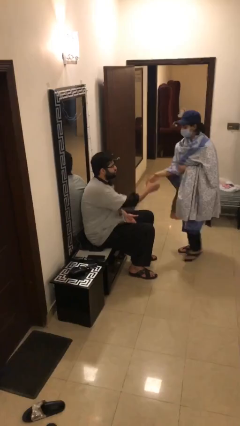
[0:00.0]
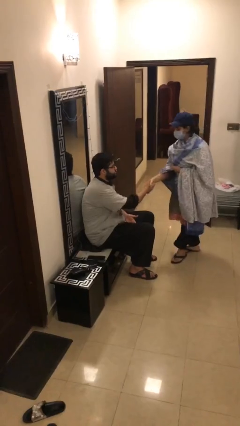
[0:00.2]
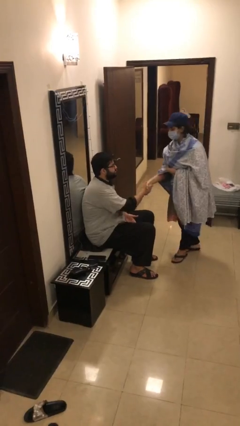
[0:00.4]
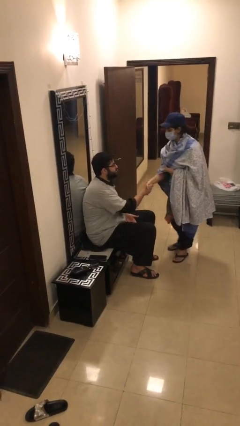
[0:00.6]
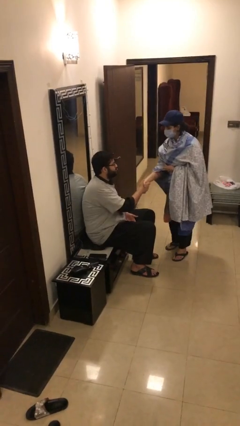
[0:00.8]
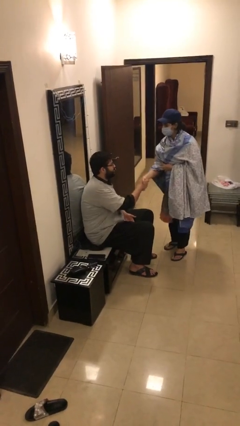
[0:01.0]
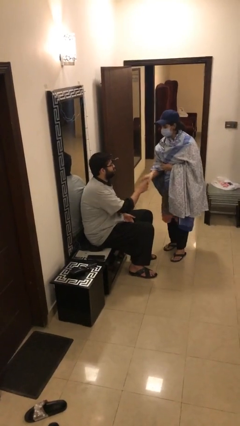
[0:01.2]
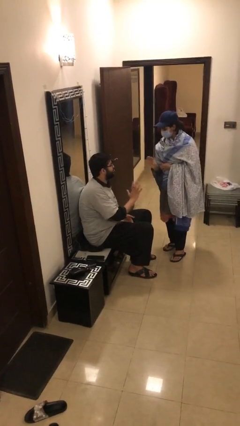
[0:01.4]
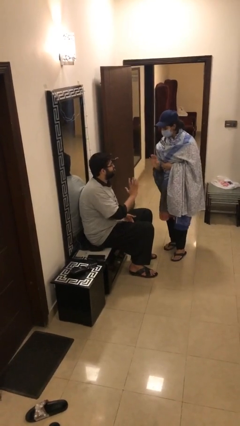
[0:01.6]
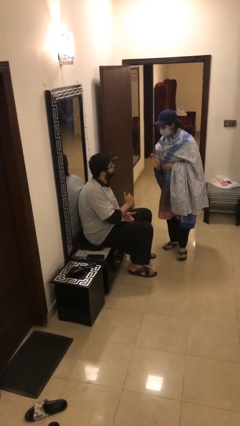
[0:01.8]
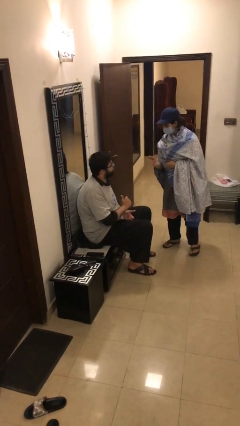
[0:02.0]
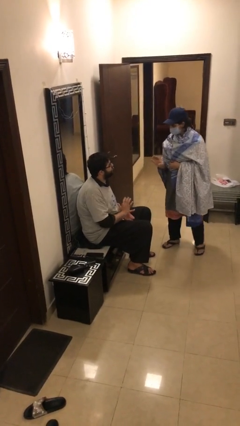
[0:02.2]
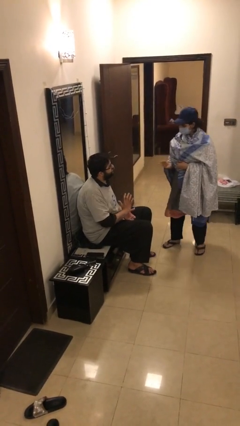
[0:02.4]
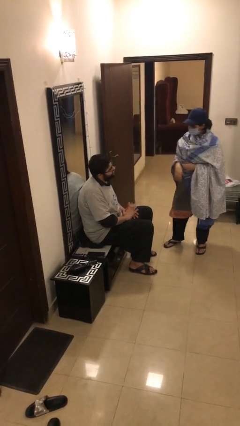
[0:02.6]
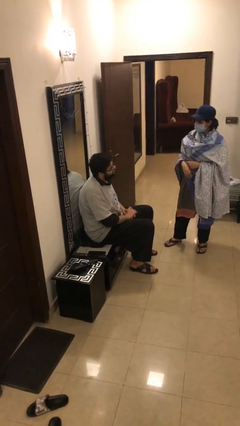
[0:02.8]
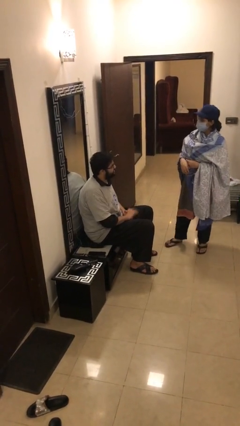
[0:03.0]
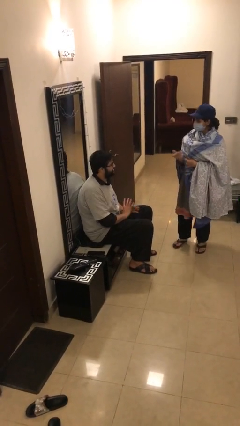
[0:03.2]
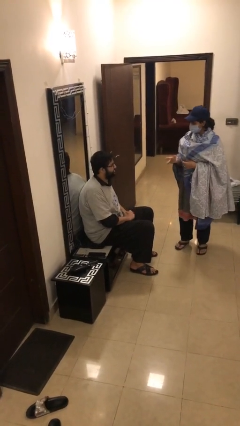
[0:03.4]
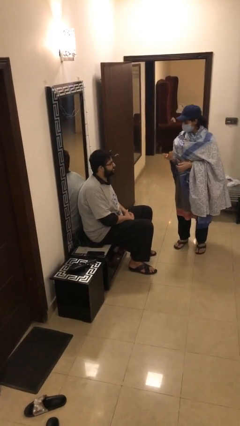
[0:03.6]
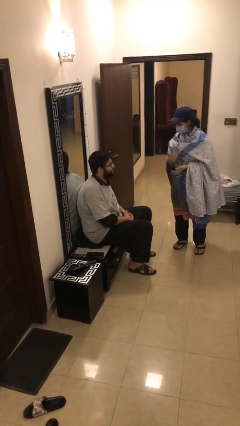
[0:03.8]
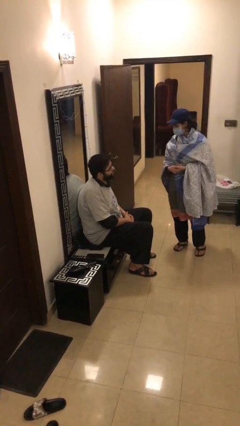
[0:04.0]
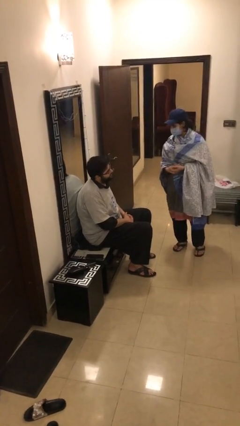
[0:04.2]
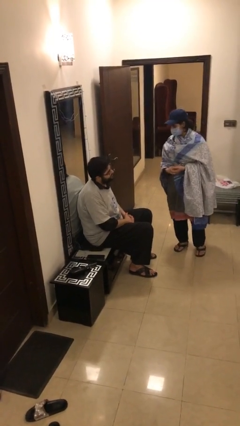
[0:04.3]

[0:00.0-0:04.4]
person shakes hand

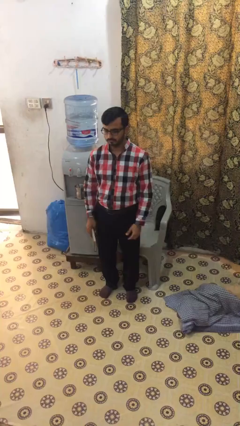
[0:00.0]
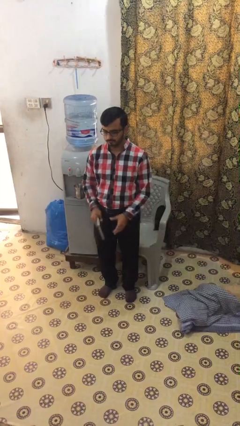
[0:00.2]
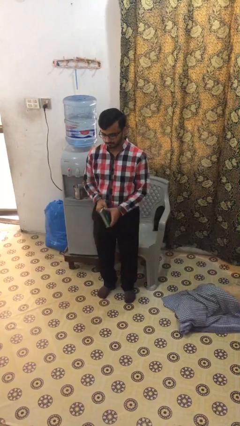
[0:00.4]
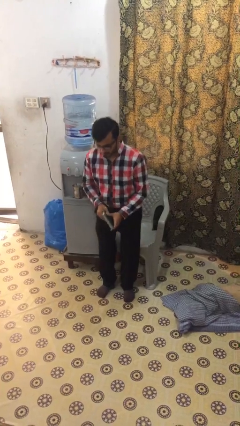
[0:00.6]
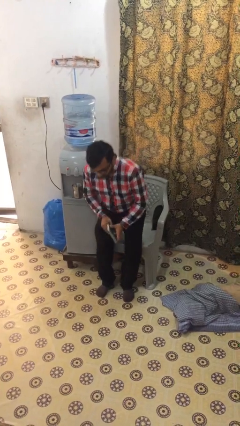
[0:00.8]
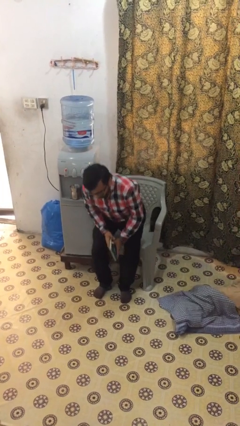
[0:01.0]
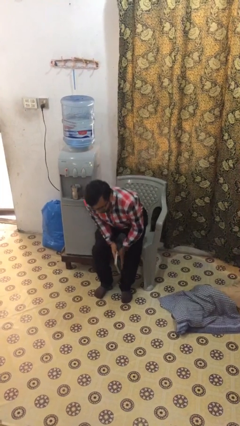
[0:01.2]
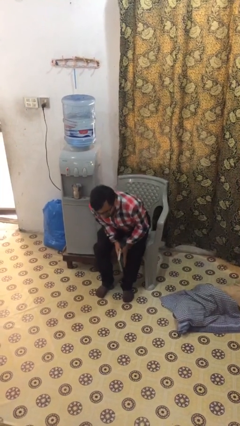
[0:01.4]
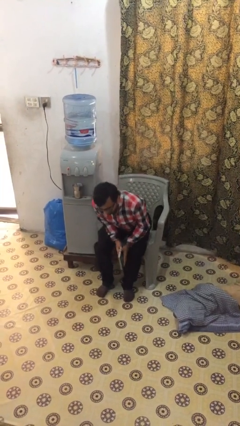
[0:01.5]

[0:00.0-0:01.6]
person sits down

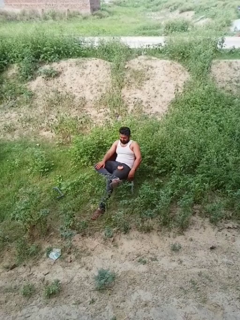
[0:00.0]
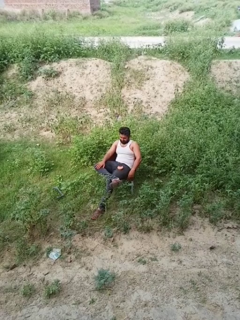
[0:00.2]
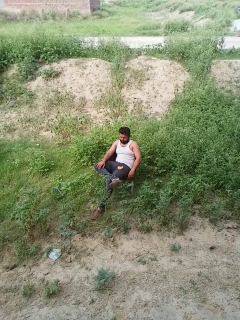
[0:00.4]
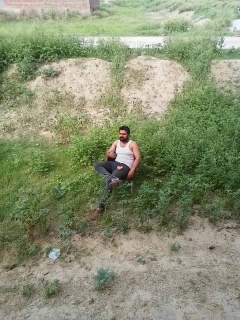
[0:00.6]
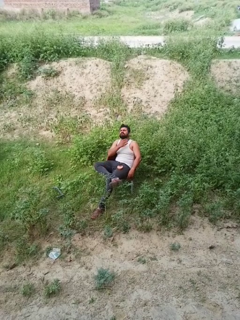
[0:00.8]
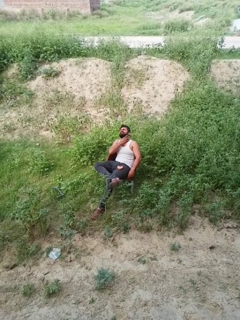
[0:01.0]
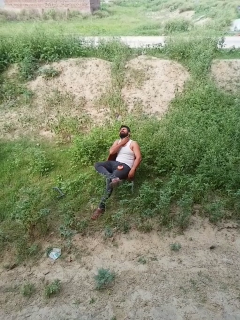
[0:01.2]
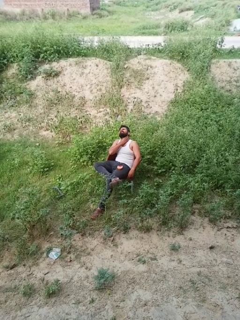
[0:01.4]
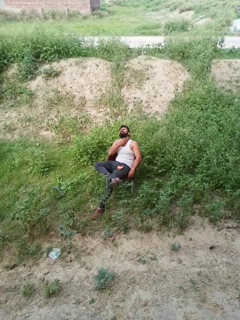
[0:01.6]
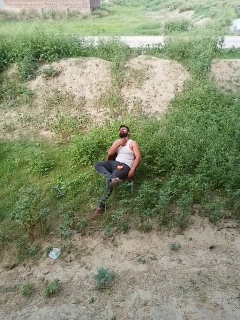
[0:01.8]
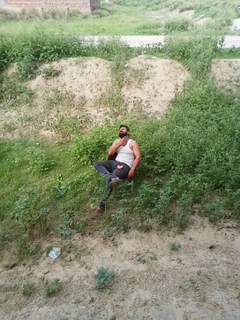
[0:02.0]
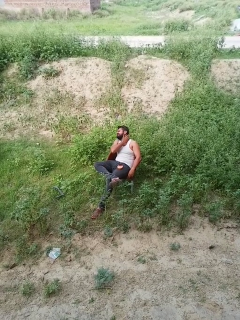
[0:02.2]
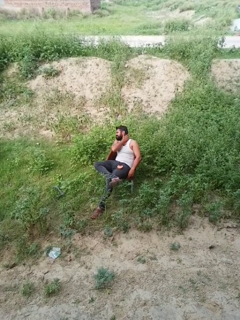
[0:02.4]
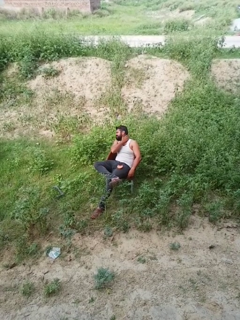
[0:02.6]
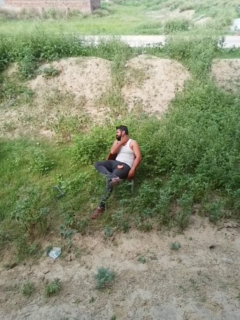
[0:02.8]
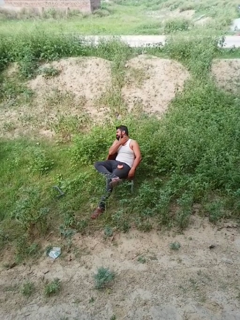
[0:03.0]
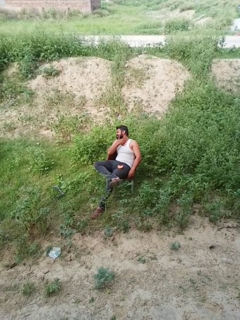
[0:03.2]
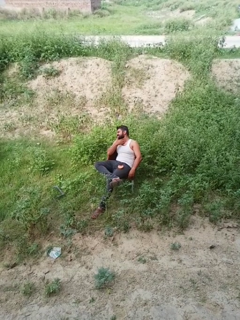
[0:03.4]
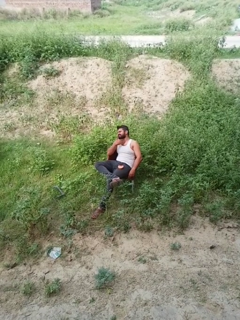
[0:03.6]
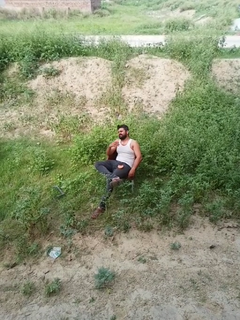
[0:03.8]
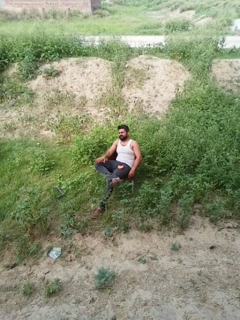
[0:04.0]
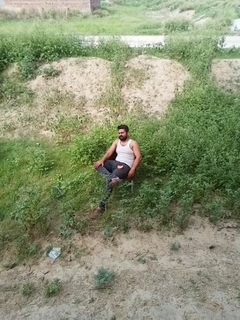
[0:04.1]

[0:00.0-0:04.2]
person rubs neck

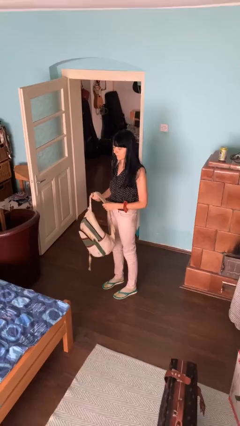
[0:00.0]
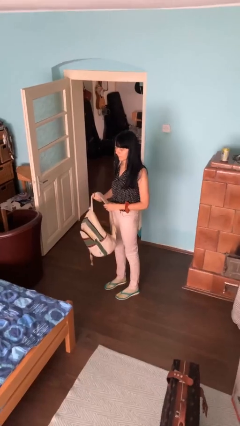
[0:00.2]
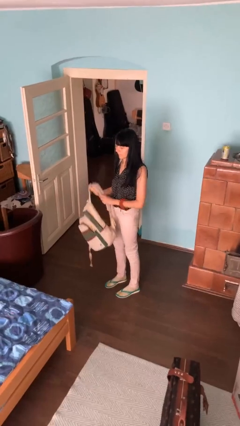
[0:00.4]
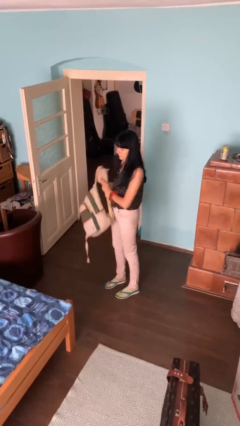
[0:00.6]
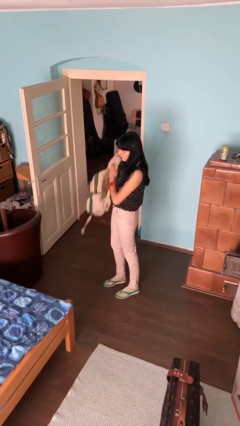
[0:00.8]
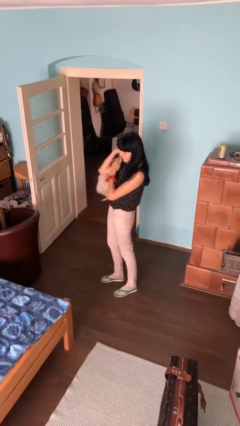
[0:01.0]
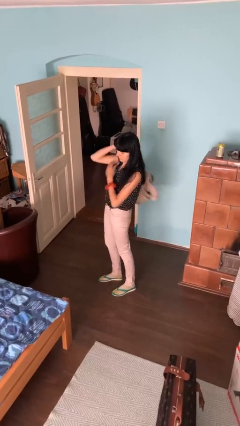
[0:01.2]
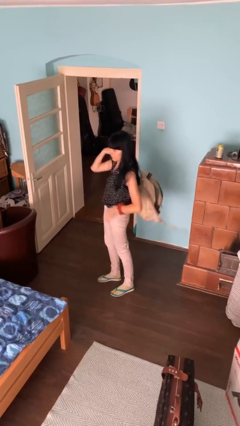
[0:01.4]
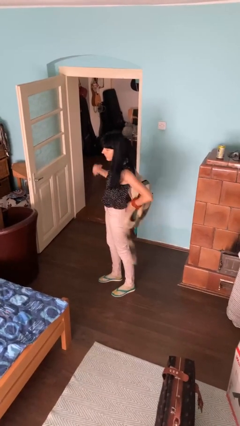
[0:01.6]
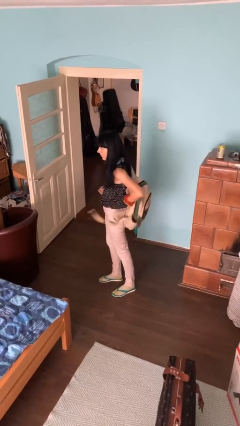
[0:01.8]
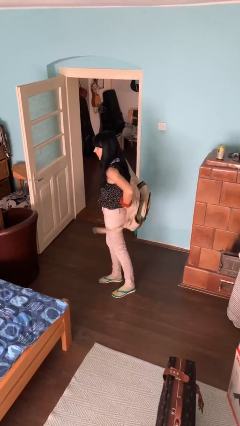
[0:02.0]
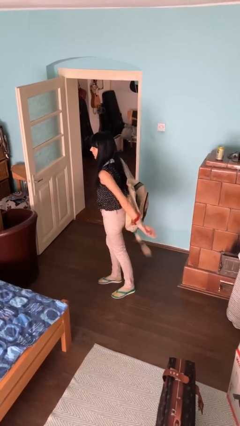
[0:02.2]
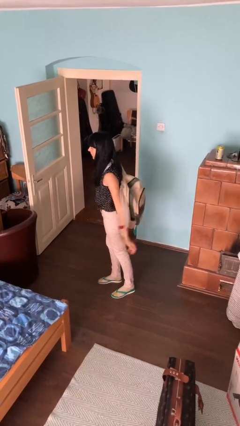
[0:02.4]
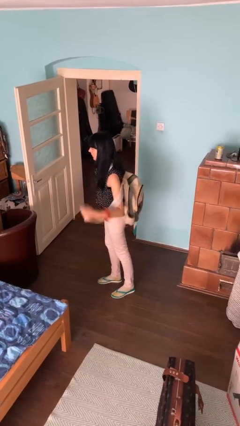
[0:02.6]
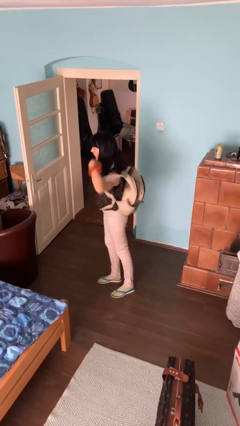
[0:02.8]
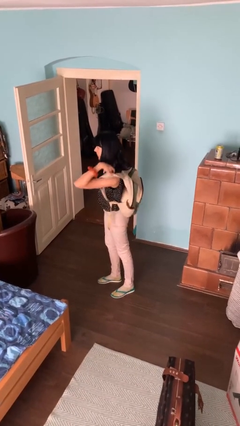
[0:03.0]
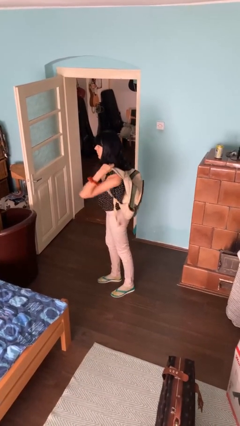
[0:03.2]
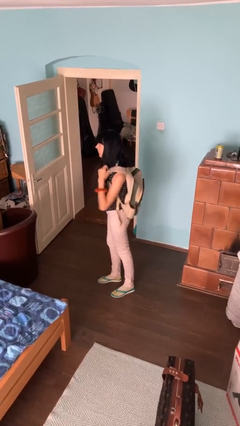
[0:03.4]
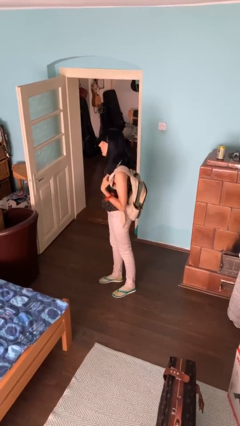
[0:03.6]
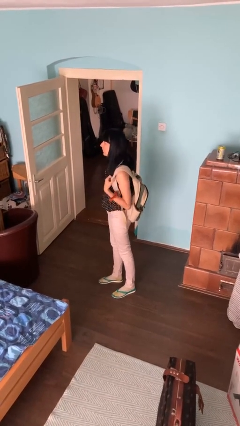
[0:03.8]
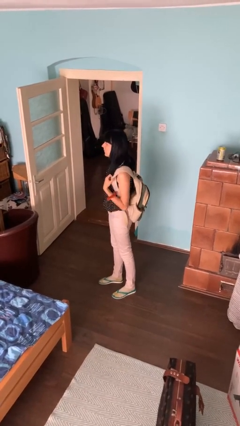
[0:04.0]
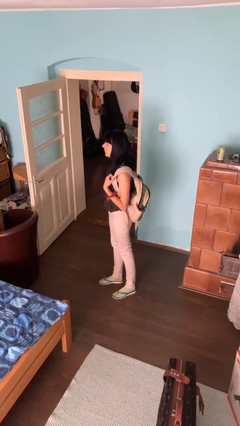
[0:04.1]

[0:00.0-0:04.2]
person puts on backpack

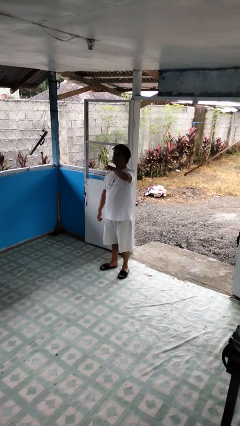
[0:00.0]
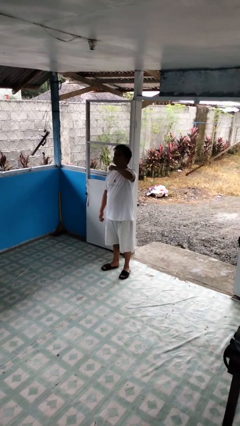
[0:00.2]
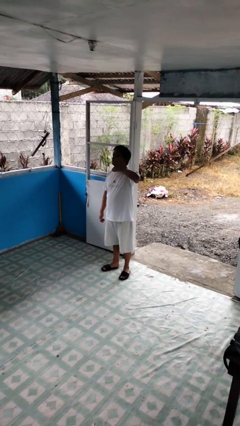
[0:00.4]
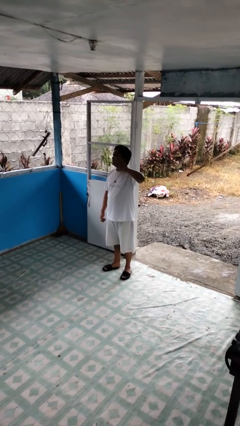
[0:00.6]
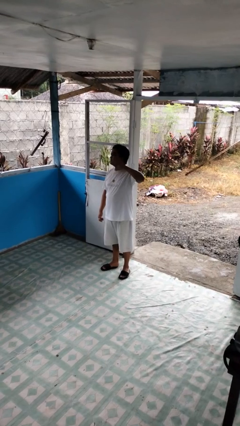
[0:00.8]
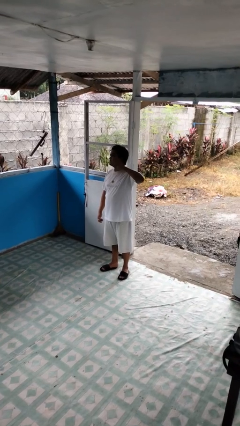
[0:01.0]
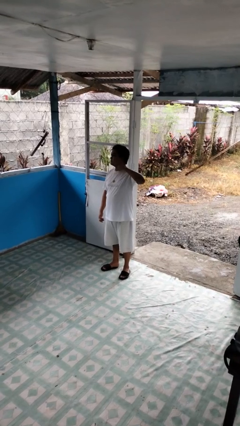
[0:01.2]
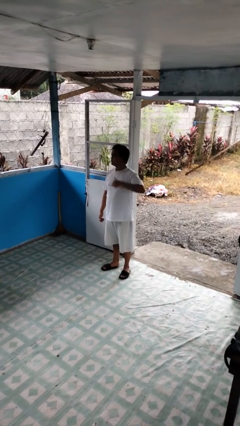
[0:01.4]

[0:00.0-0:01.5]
person gestures cut

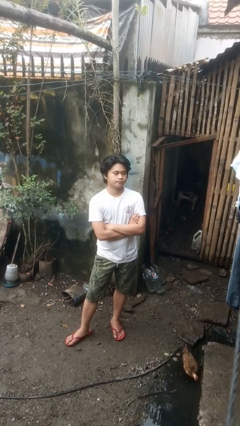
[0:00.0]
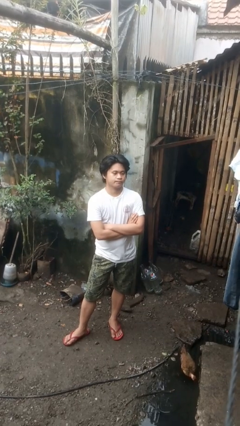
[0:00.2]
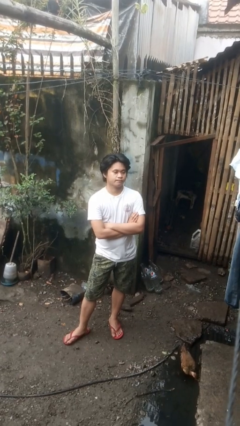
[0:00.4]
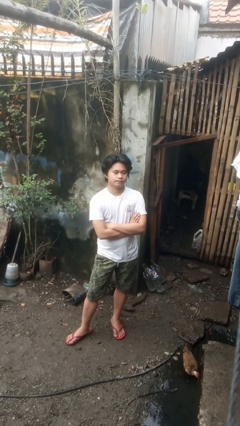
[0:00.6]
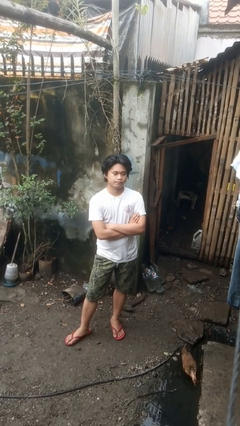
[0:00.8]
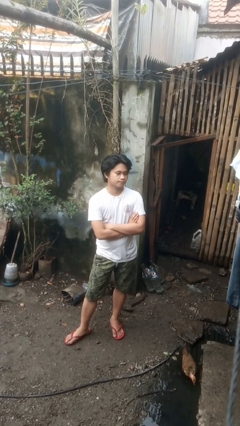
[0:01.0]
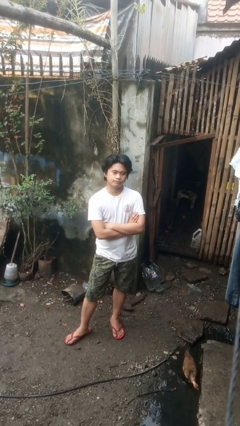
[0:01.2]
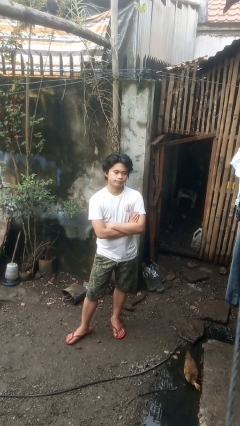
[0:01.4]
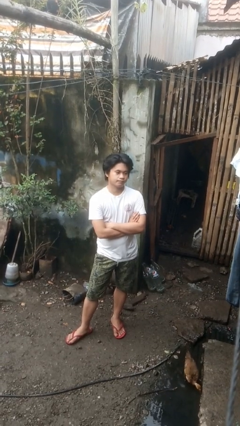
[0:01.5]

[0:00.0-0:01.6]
person shakes head

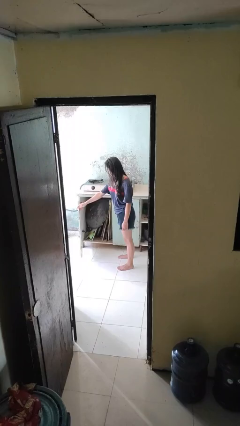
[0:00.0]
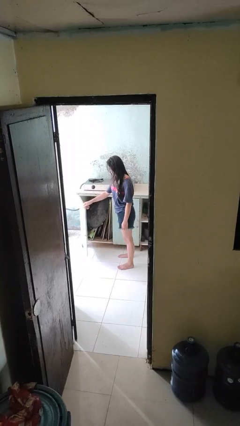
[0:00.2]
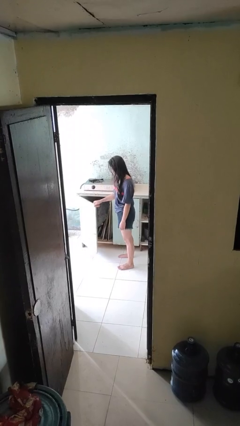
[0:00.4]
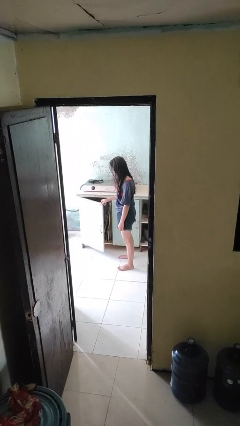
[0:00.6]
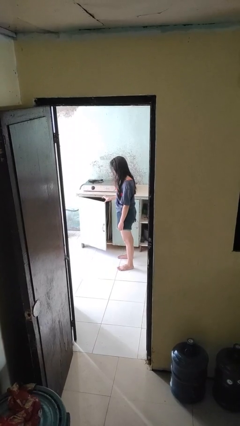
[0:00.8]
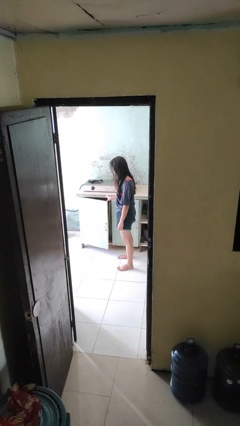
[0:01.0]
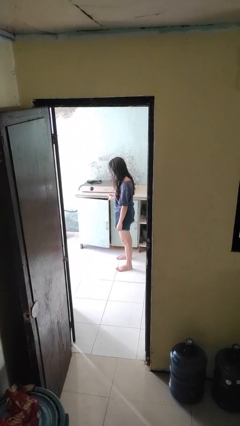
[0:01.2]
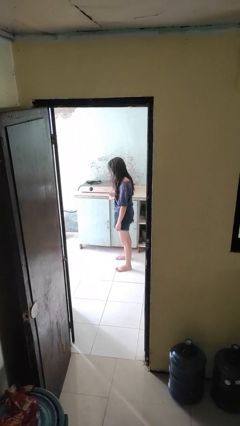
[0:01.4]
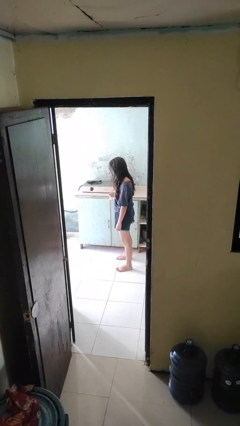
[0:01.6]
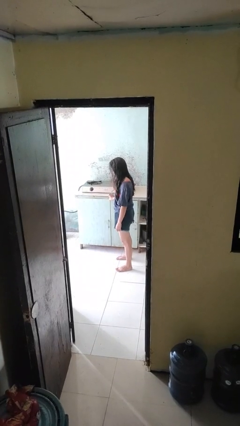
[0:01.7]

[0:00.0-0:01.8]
person closes cabinet
